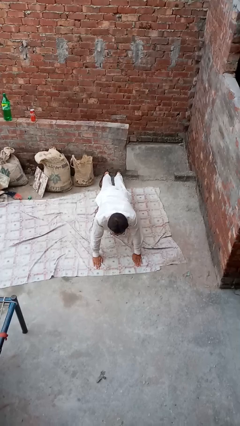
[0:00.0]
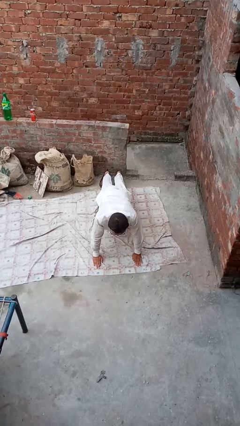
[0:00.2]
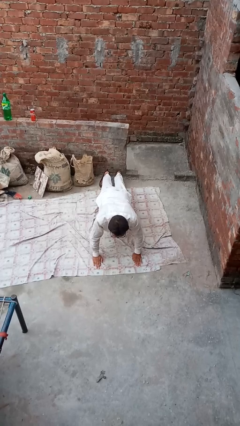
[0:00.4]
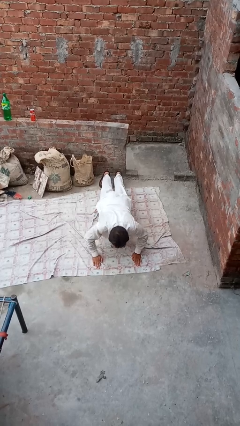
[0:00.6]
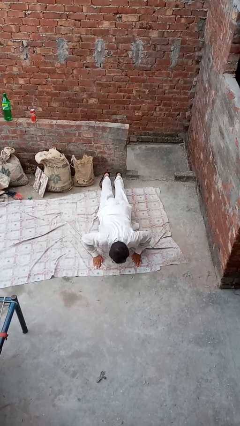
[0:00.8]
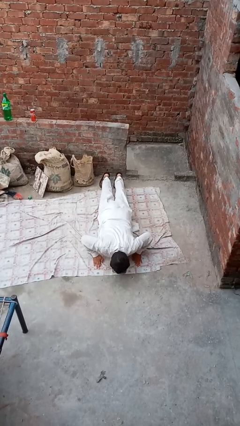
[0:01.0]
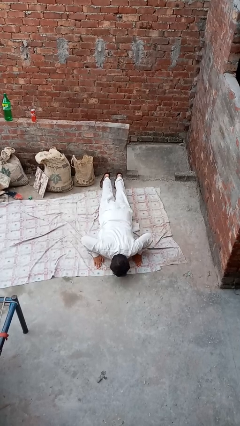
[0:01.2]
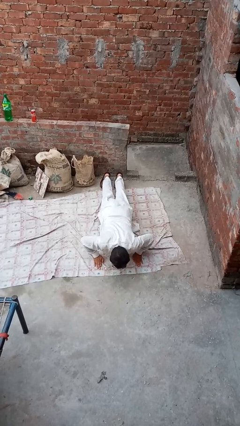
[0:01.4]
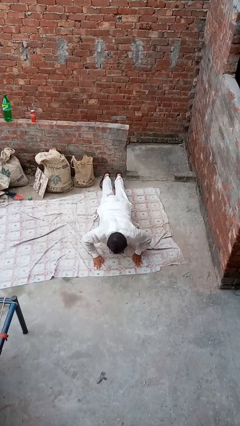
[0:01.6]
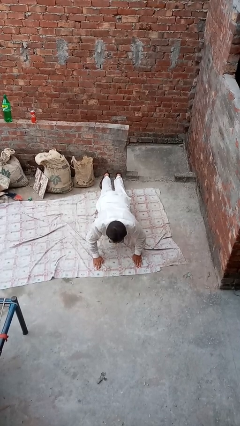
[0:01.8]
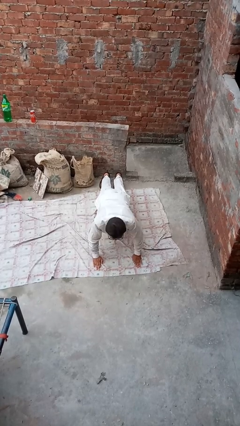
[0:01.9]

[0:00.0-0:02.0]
person exercises with situp

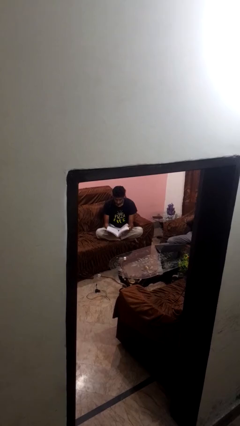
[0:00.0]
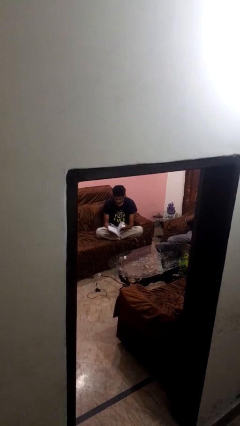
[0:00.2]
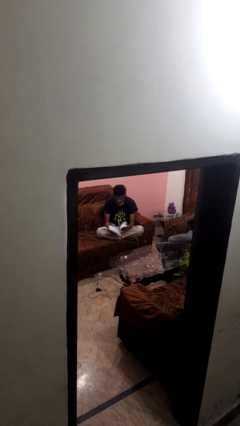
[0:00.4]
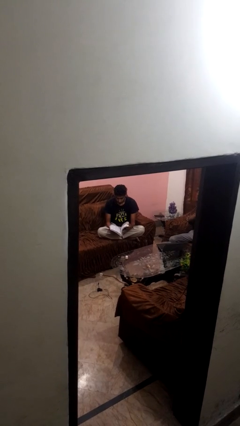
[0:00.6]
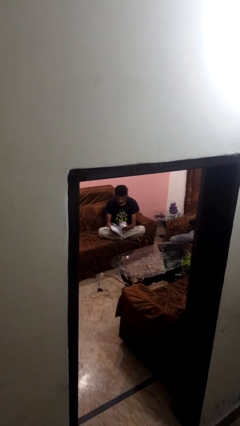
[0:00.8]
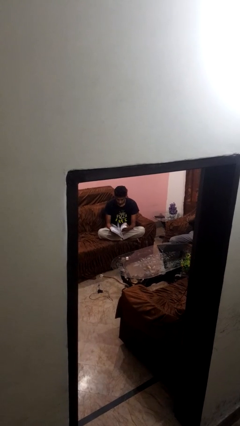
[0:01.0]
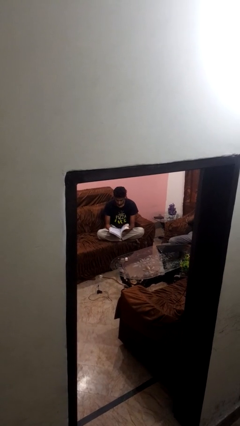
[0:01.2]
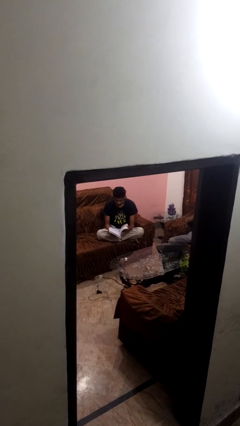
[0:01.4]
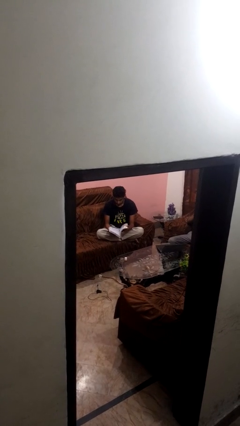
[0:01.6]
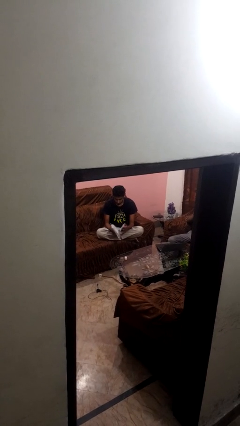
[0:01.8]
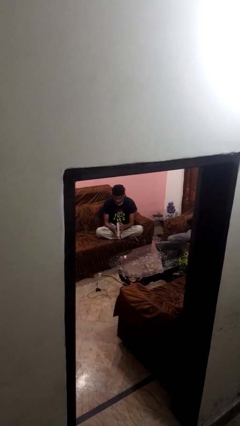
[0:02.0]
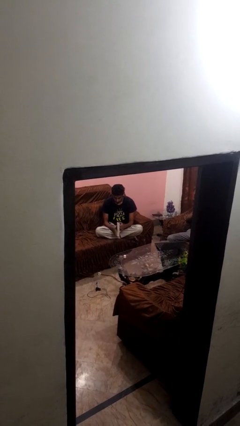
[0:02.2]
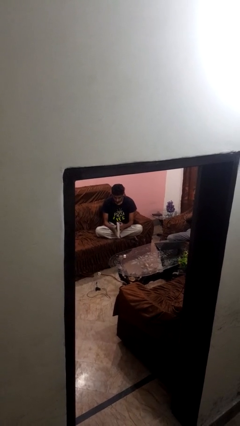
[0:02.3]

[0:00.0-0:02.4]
person reads book

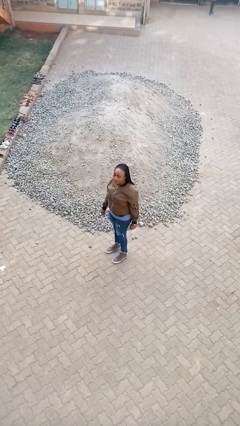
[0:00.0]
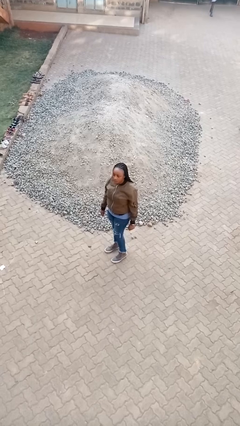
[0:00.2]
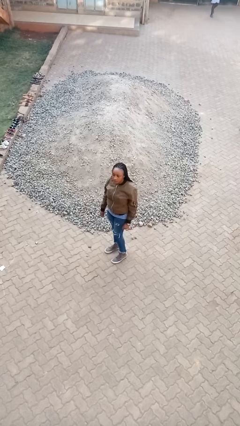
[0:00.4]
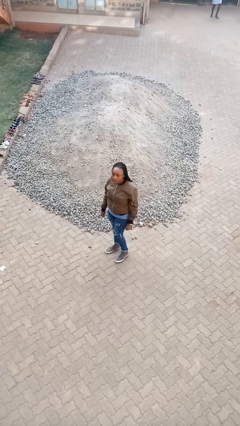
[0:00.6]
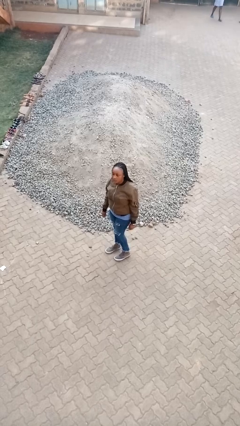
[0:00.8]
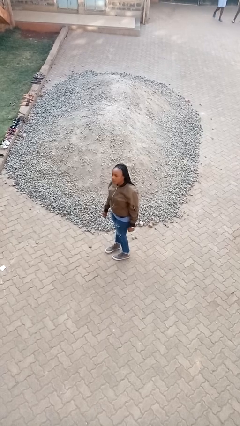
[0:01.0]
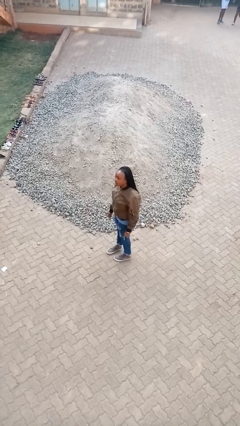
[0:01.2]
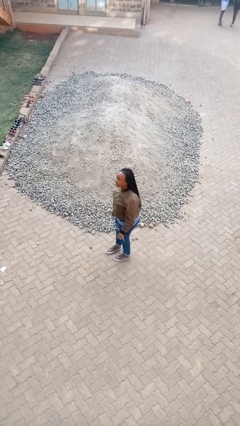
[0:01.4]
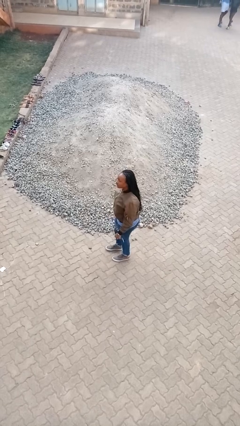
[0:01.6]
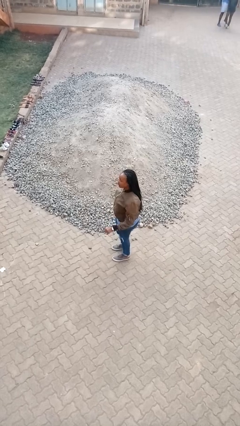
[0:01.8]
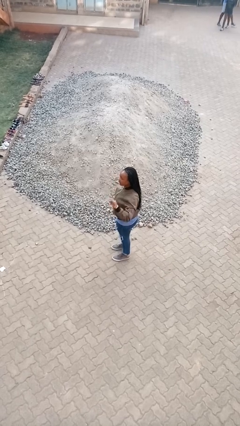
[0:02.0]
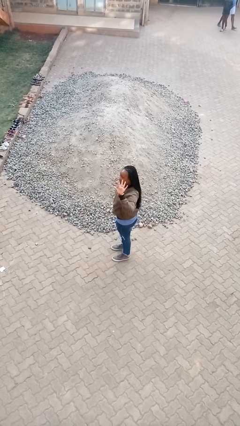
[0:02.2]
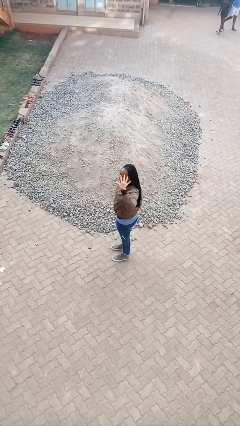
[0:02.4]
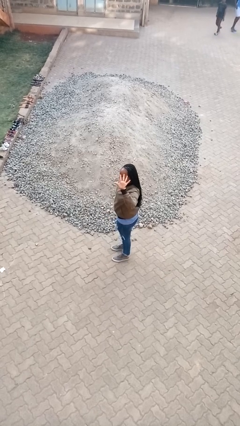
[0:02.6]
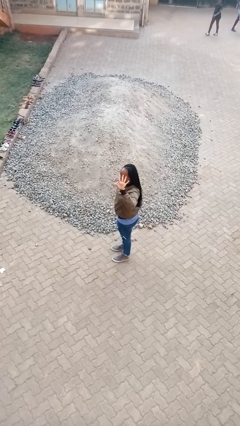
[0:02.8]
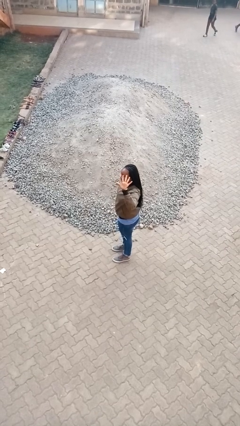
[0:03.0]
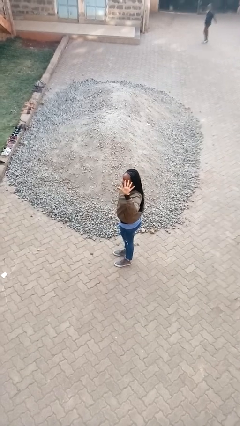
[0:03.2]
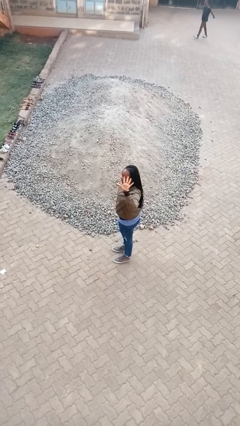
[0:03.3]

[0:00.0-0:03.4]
person gestures number five

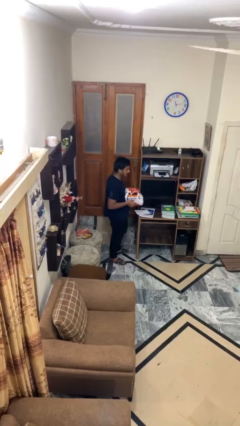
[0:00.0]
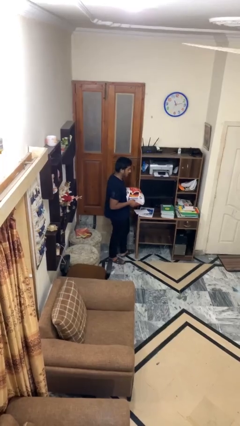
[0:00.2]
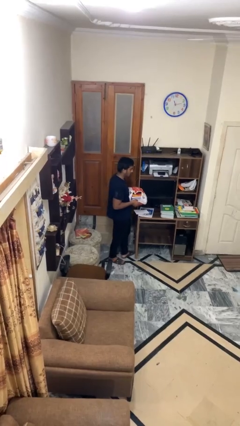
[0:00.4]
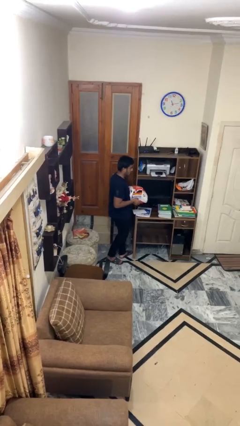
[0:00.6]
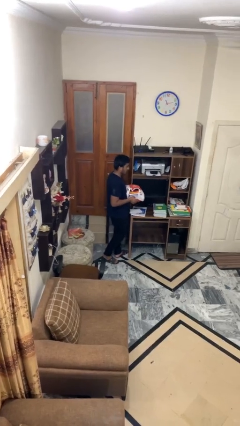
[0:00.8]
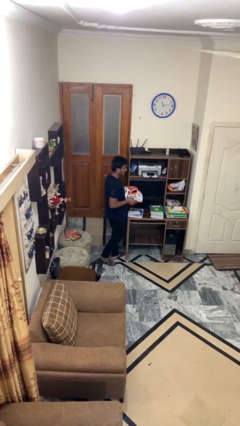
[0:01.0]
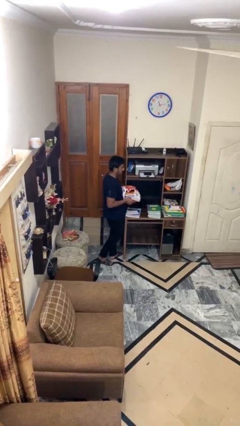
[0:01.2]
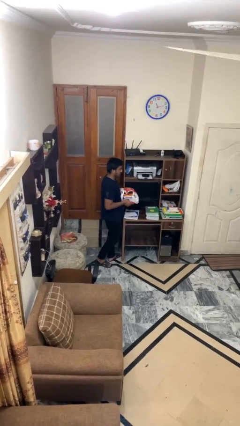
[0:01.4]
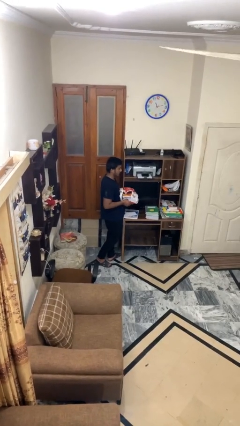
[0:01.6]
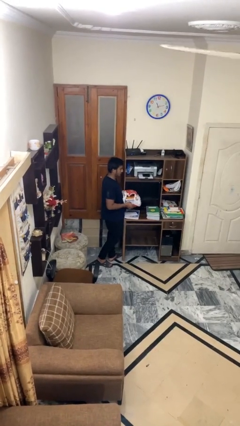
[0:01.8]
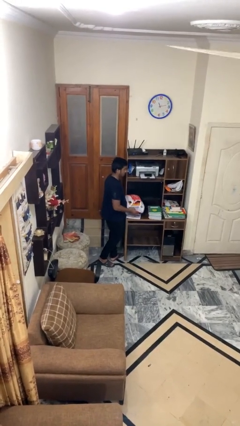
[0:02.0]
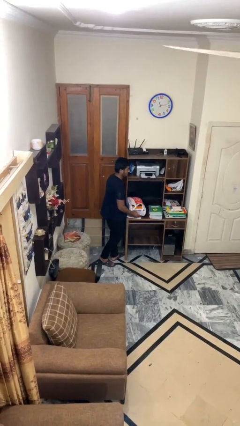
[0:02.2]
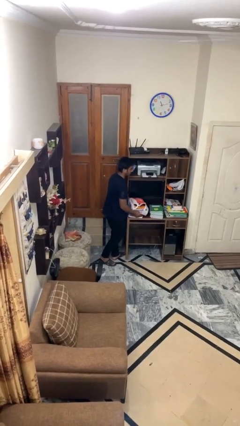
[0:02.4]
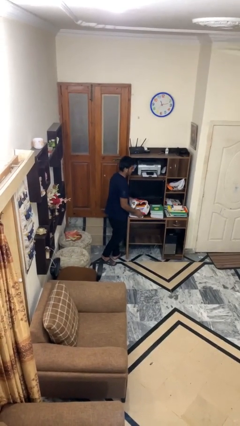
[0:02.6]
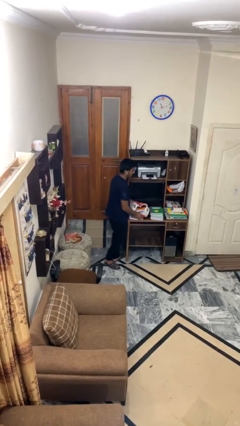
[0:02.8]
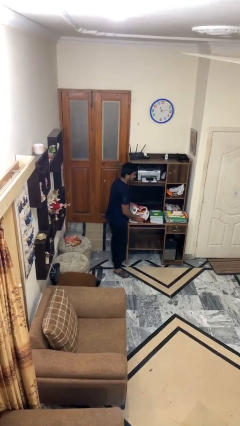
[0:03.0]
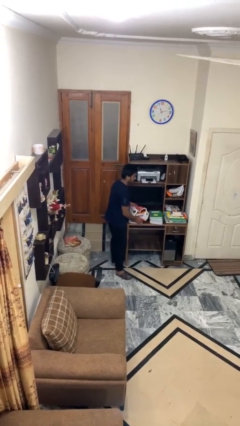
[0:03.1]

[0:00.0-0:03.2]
person puts down object on table

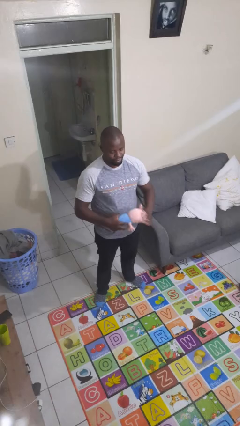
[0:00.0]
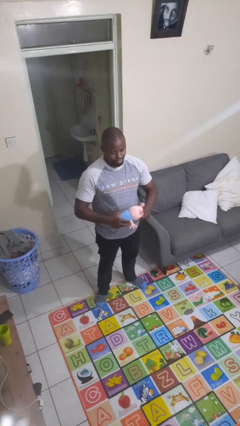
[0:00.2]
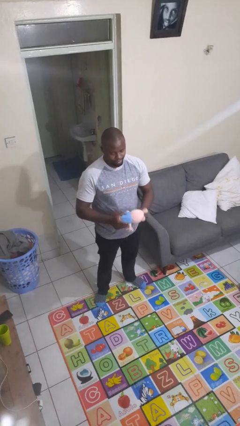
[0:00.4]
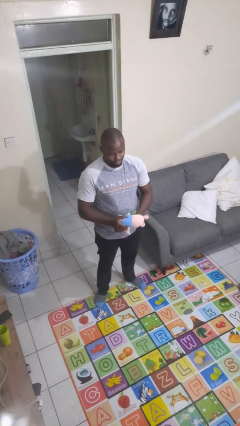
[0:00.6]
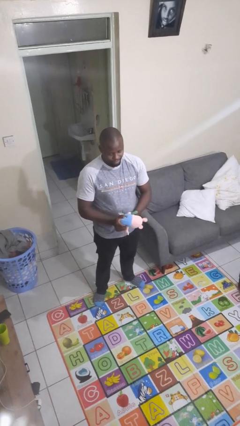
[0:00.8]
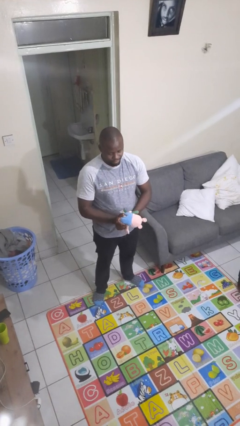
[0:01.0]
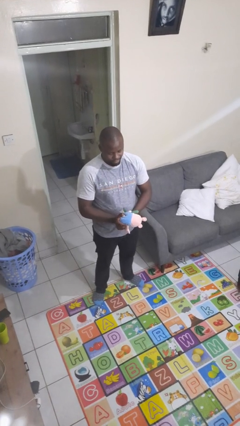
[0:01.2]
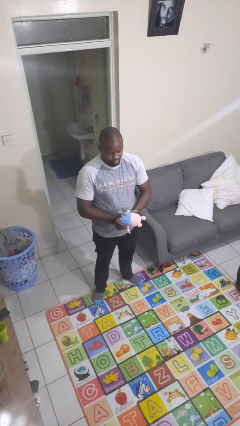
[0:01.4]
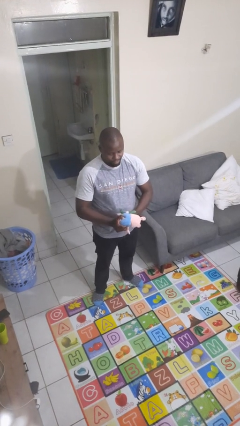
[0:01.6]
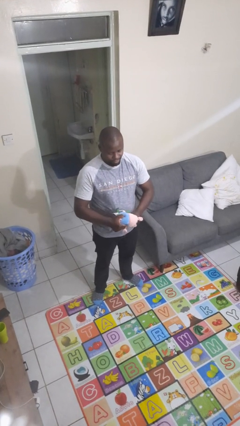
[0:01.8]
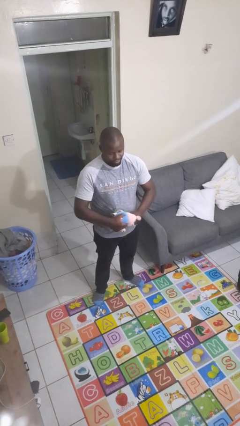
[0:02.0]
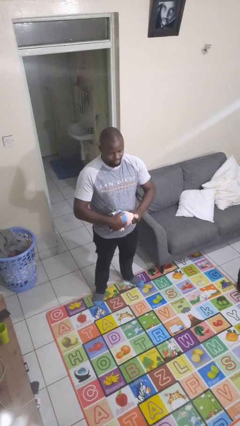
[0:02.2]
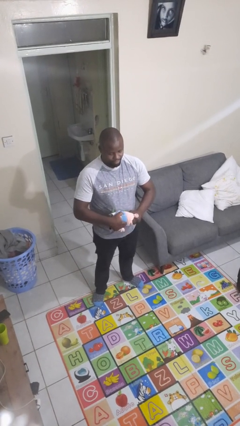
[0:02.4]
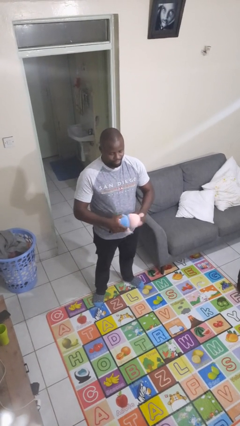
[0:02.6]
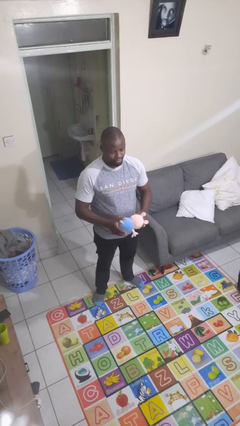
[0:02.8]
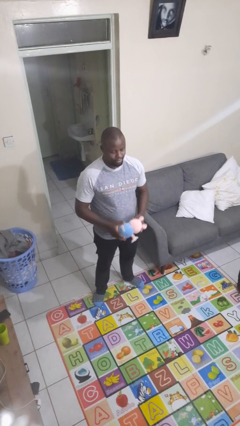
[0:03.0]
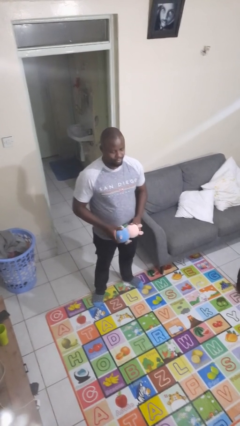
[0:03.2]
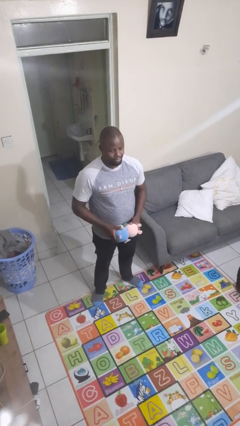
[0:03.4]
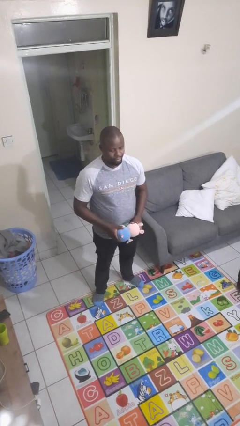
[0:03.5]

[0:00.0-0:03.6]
person squeezes object

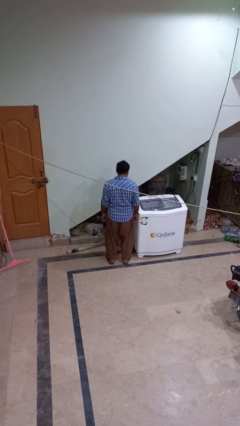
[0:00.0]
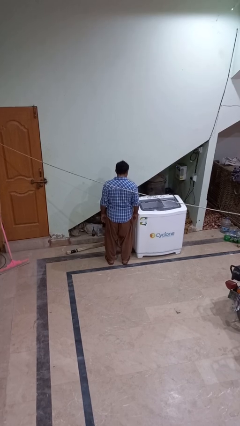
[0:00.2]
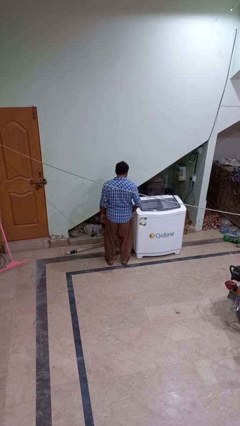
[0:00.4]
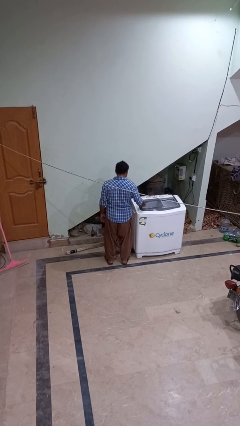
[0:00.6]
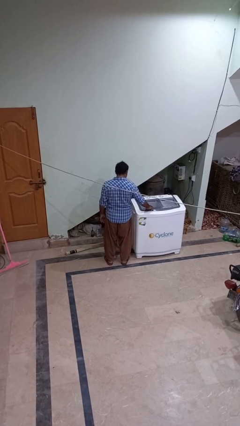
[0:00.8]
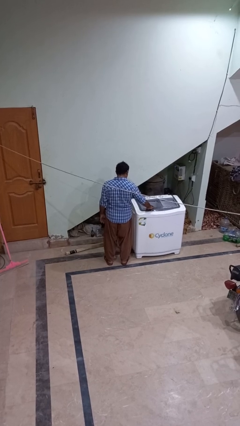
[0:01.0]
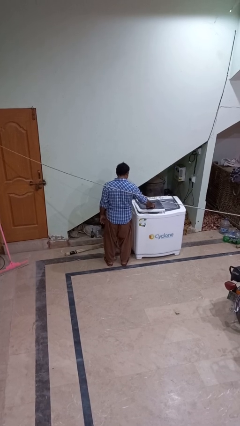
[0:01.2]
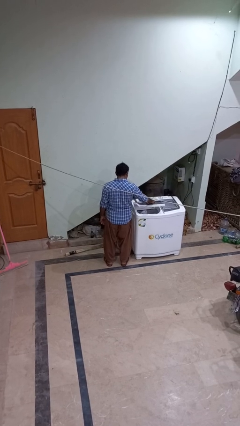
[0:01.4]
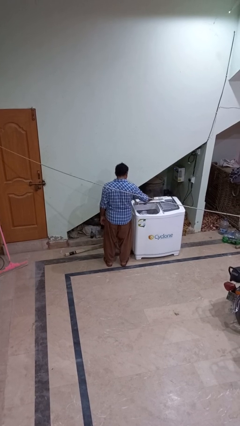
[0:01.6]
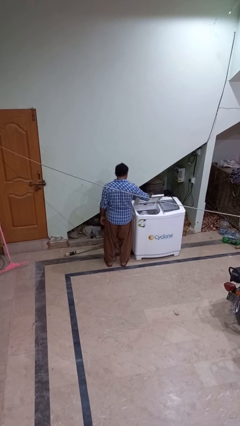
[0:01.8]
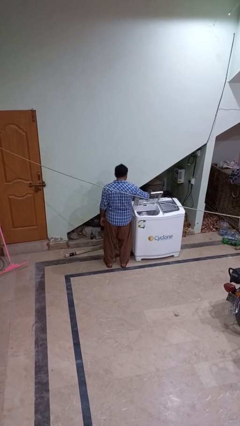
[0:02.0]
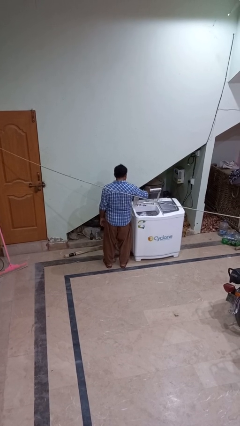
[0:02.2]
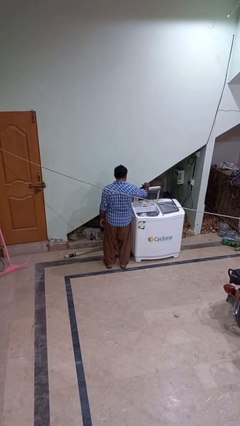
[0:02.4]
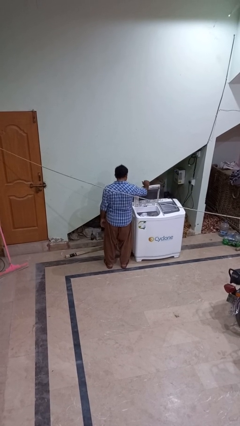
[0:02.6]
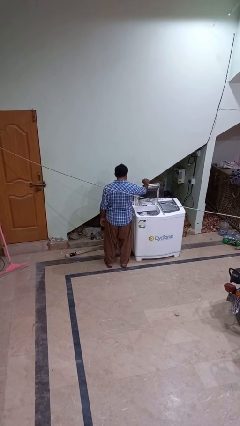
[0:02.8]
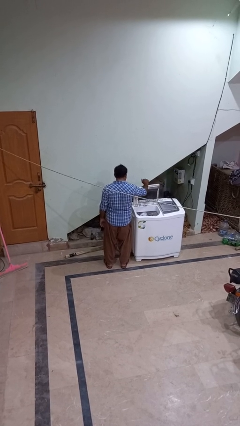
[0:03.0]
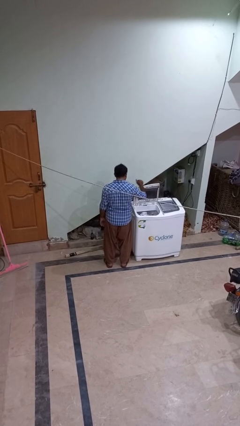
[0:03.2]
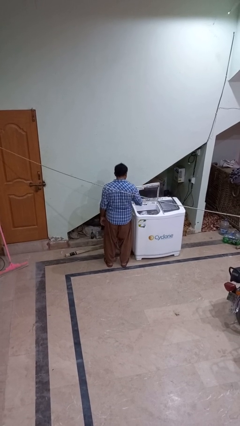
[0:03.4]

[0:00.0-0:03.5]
person opens clothes washer
